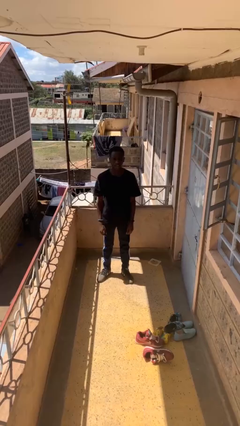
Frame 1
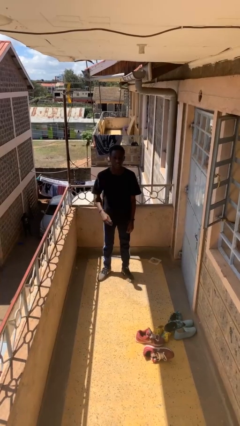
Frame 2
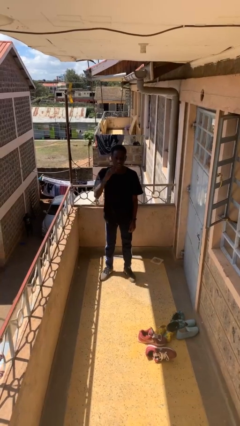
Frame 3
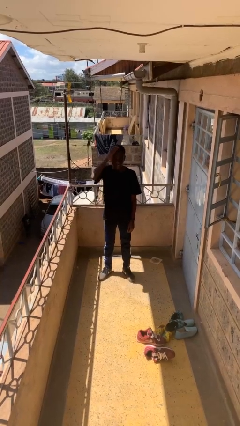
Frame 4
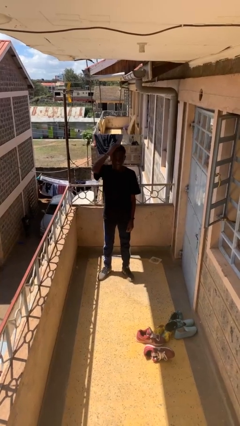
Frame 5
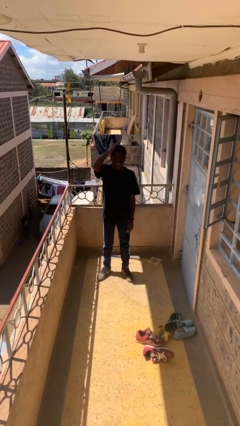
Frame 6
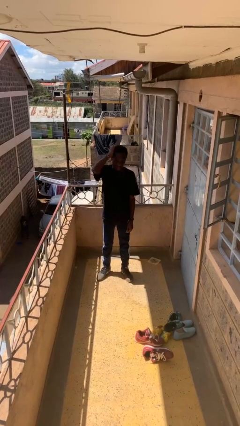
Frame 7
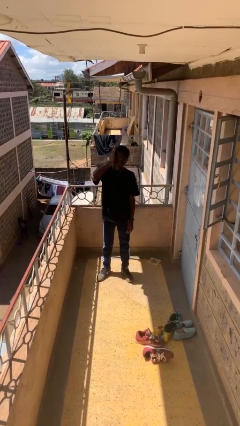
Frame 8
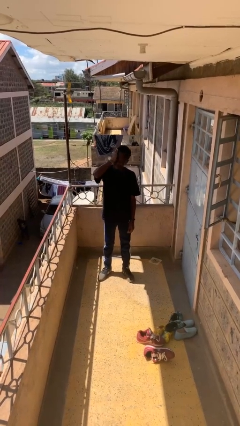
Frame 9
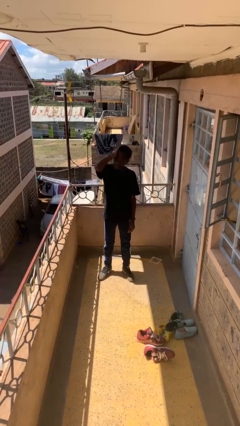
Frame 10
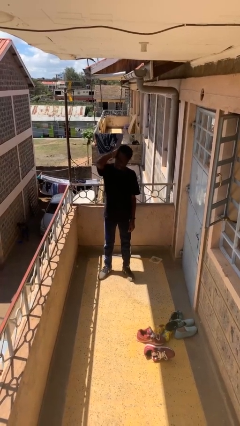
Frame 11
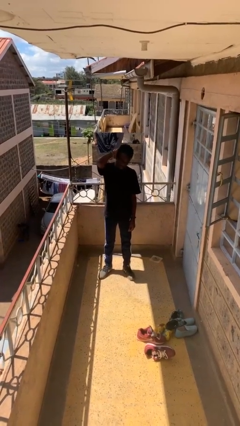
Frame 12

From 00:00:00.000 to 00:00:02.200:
person strokes hair

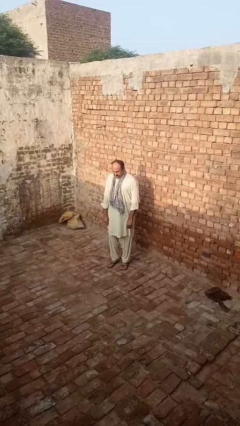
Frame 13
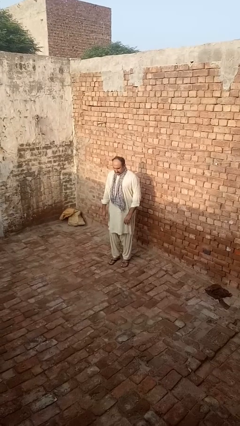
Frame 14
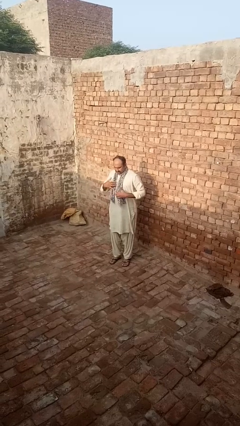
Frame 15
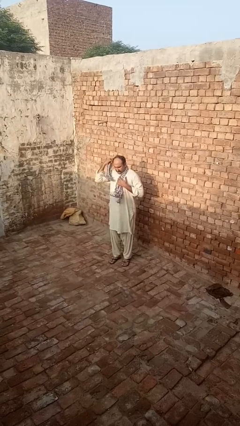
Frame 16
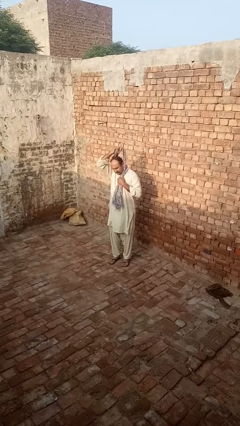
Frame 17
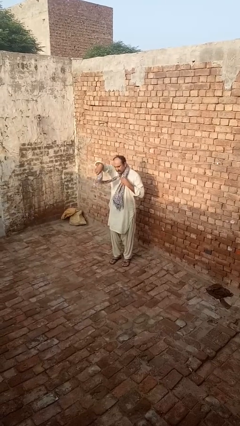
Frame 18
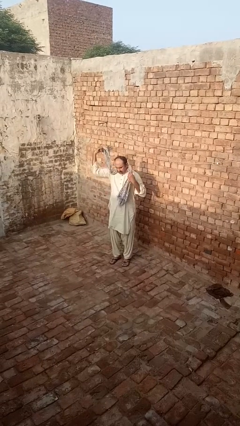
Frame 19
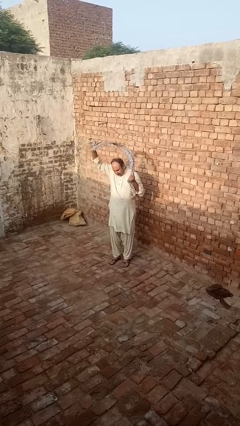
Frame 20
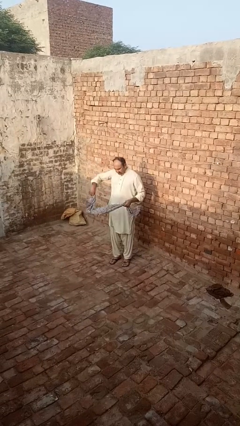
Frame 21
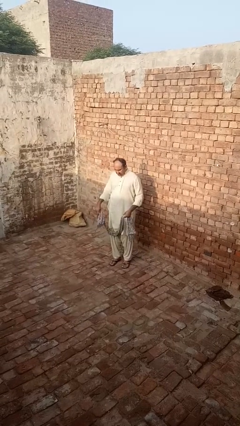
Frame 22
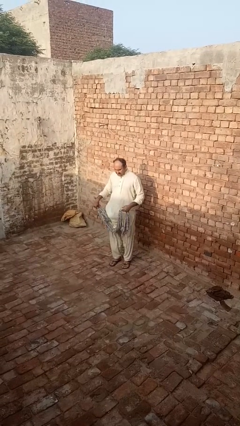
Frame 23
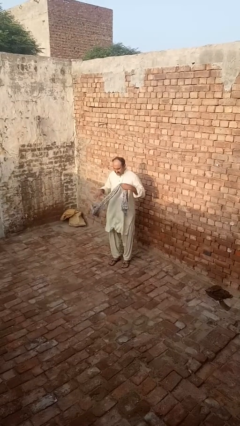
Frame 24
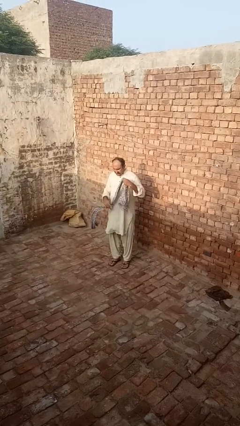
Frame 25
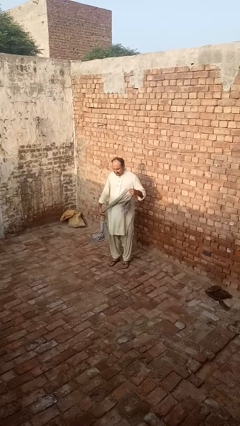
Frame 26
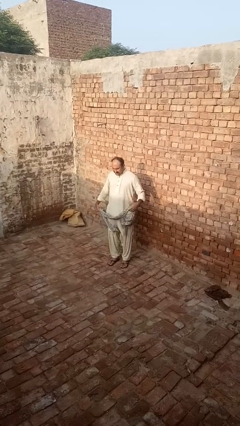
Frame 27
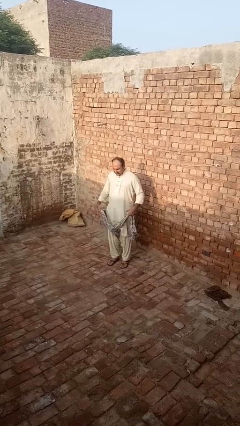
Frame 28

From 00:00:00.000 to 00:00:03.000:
person takes off scarf

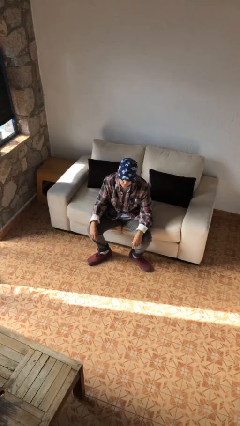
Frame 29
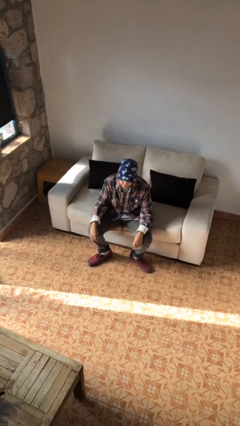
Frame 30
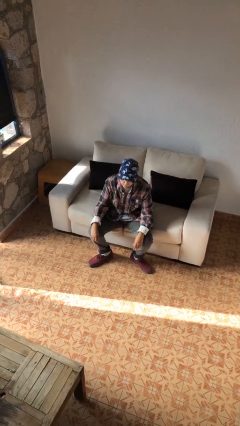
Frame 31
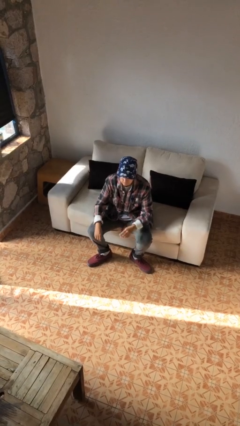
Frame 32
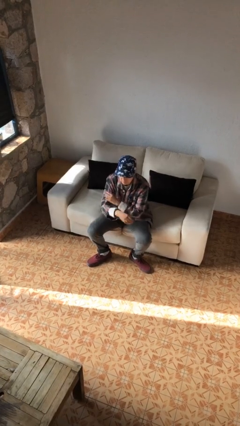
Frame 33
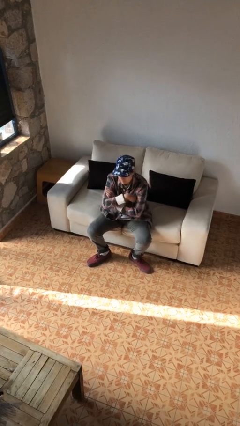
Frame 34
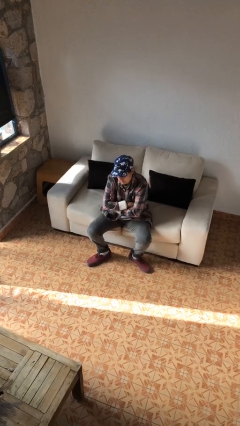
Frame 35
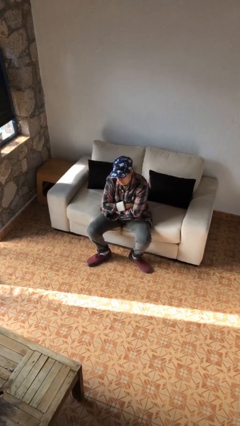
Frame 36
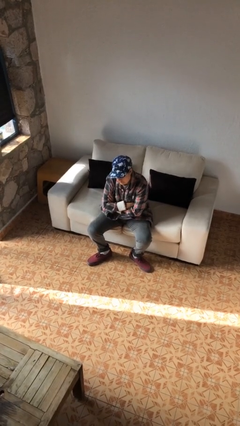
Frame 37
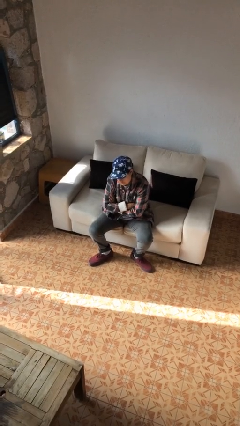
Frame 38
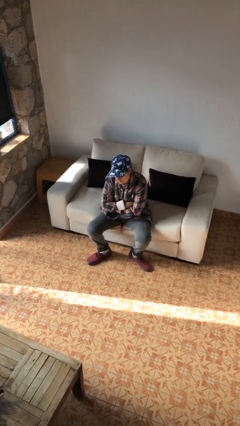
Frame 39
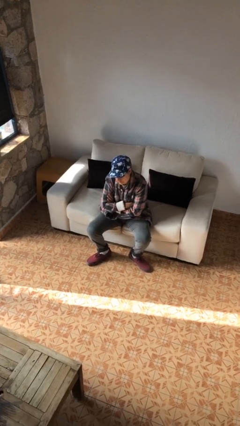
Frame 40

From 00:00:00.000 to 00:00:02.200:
person crosses arms

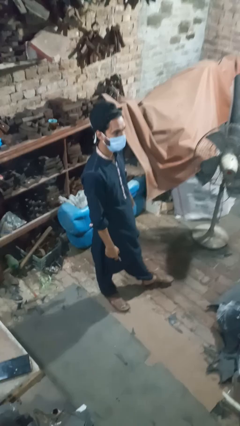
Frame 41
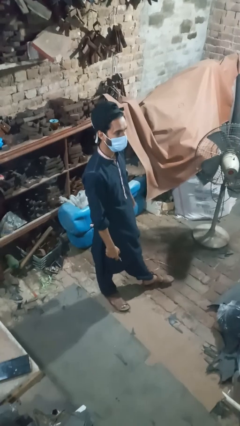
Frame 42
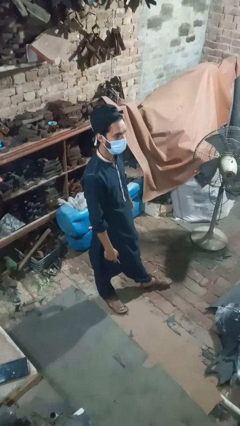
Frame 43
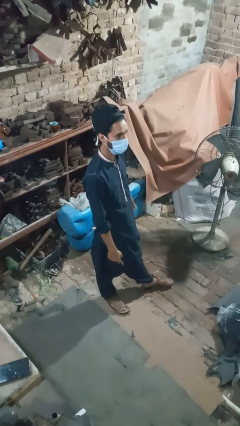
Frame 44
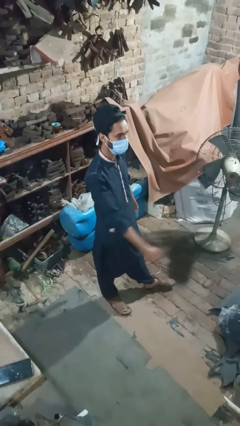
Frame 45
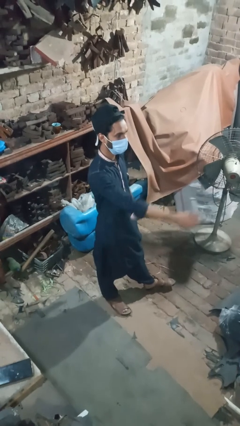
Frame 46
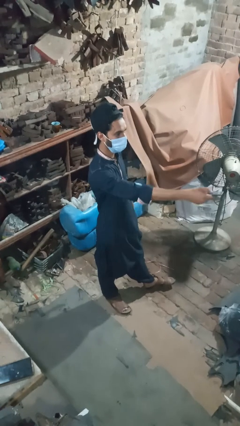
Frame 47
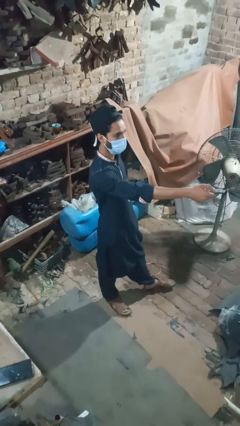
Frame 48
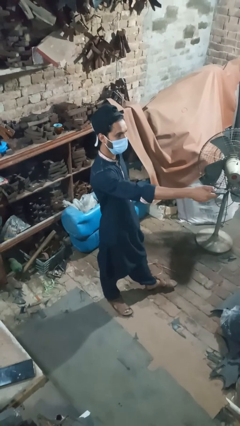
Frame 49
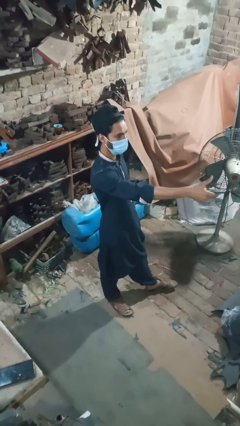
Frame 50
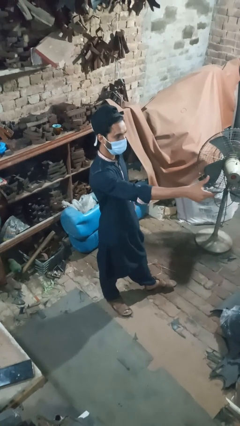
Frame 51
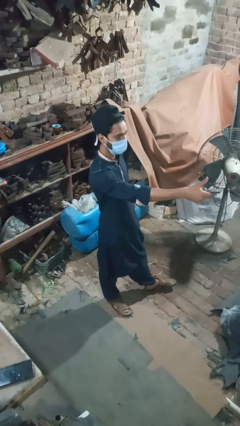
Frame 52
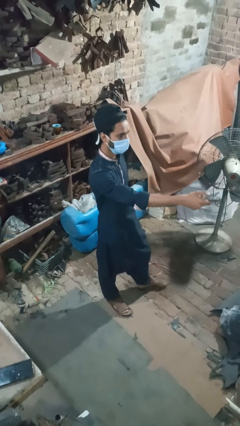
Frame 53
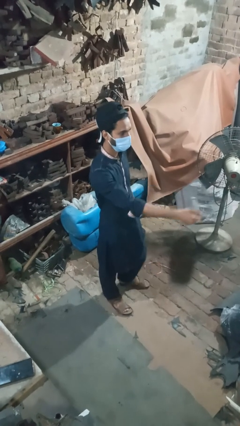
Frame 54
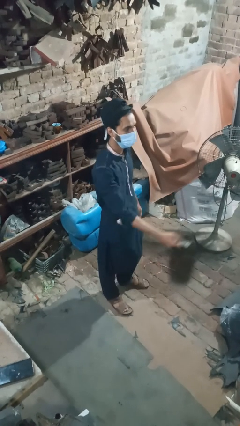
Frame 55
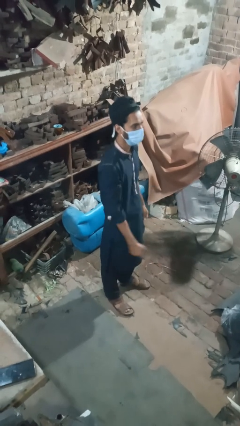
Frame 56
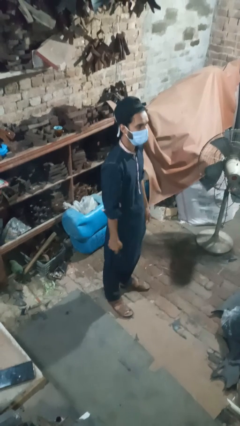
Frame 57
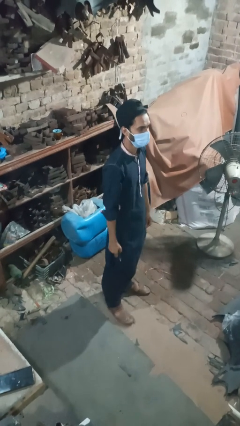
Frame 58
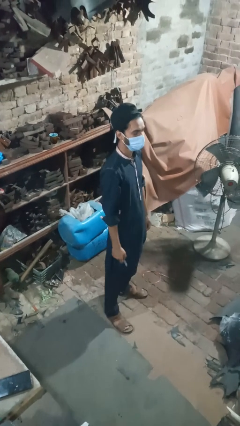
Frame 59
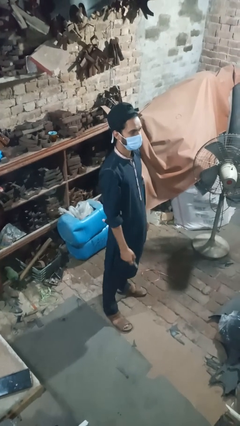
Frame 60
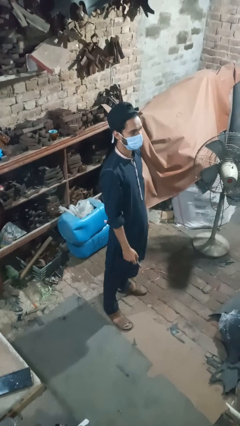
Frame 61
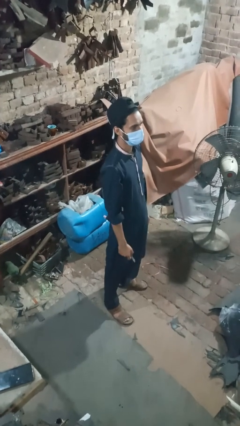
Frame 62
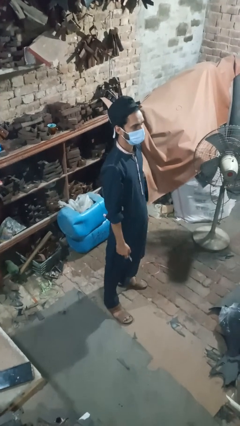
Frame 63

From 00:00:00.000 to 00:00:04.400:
person uses television remote

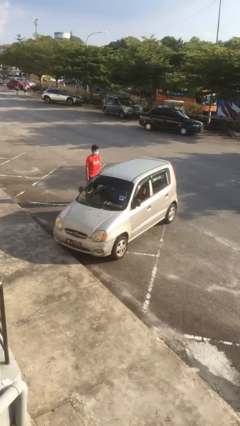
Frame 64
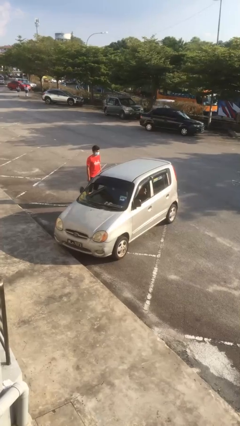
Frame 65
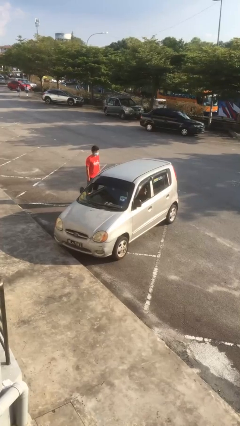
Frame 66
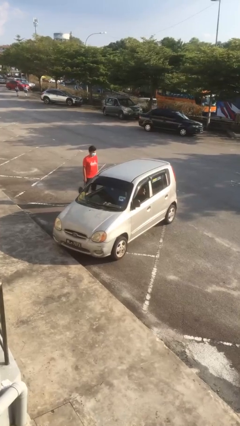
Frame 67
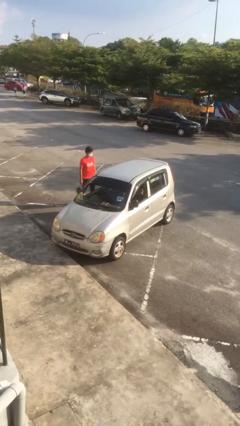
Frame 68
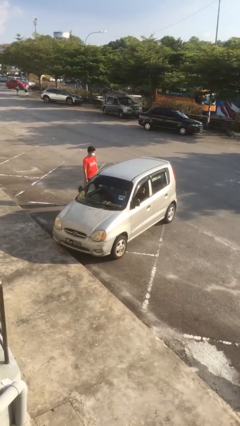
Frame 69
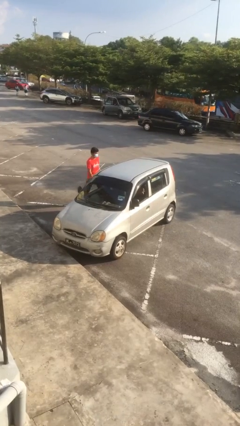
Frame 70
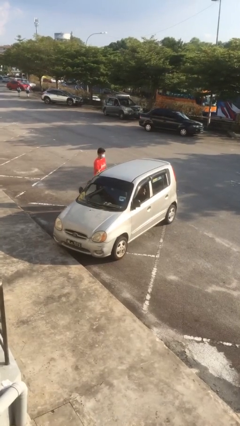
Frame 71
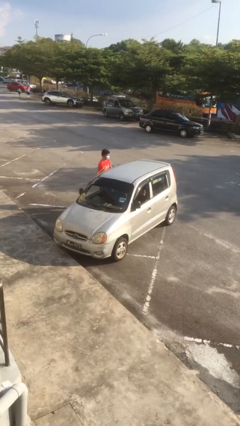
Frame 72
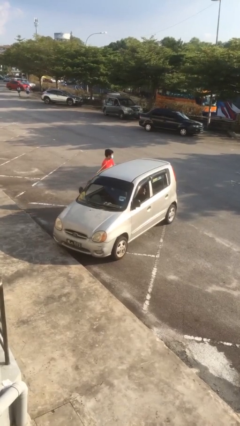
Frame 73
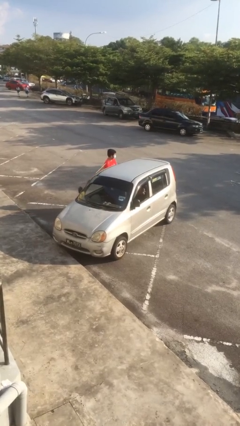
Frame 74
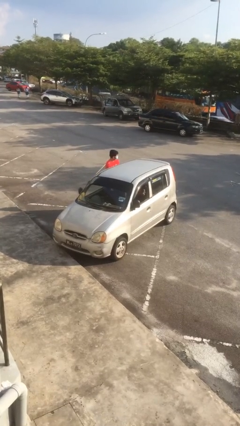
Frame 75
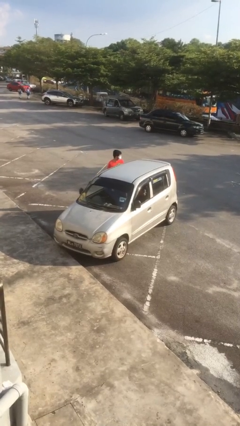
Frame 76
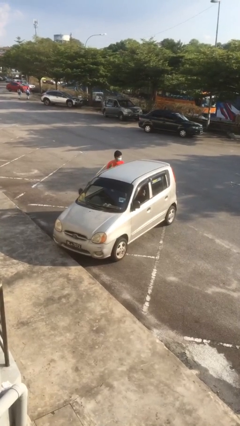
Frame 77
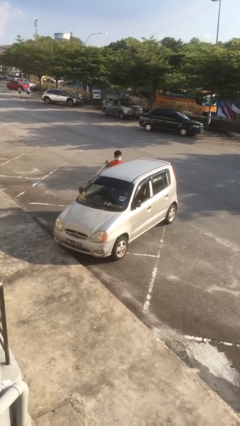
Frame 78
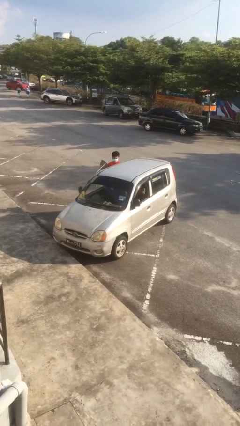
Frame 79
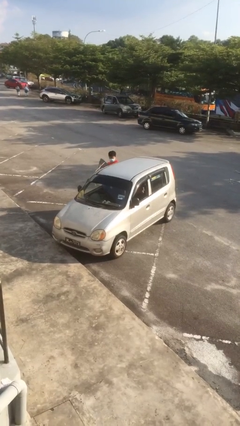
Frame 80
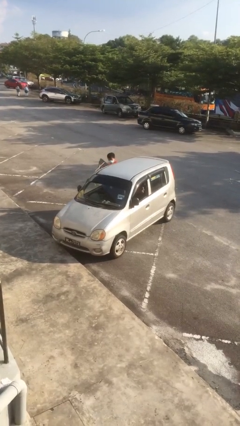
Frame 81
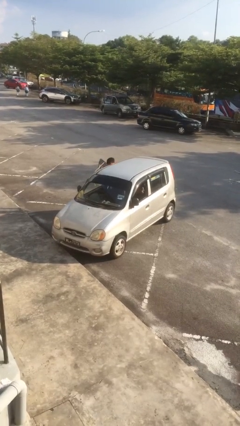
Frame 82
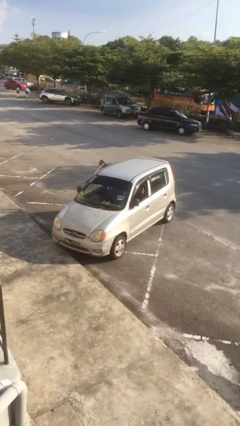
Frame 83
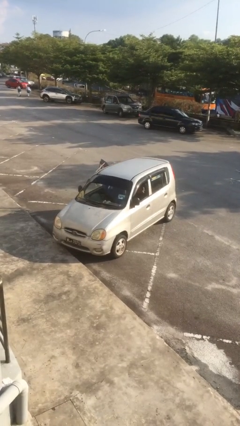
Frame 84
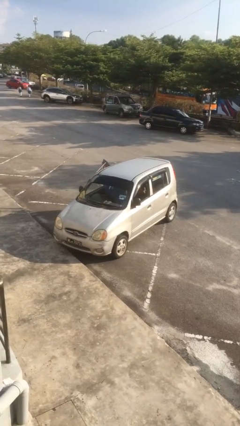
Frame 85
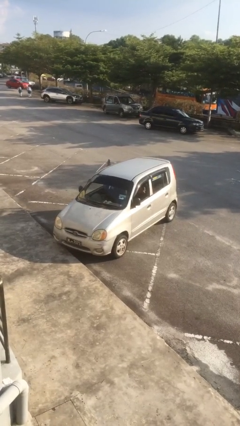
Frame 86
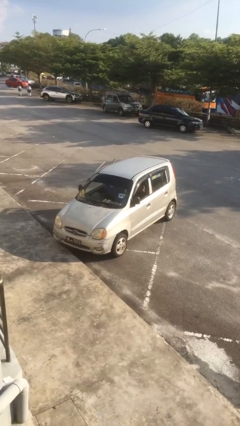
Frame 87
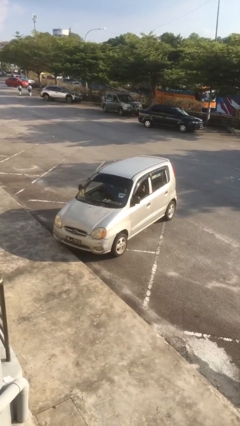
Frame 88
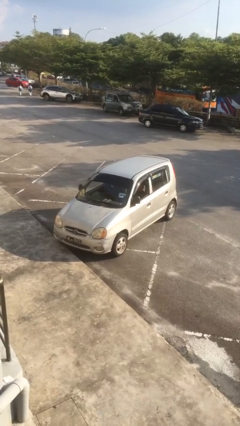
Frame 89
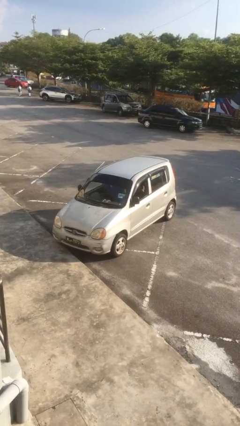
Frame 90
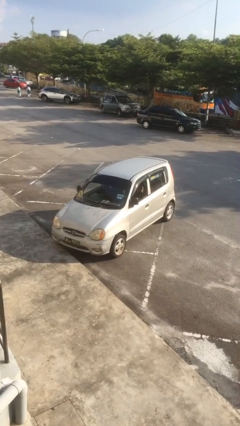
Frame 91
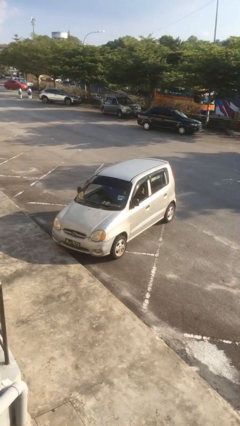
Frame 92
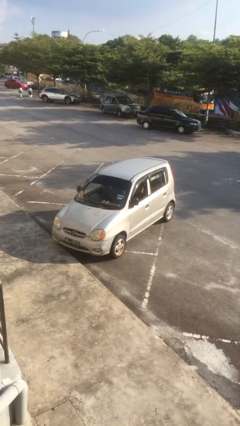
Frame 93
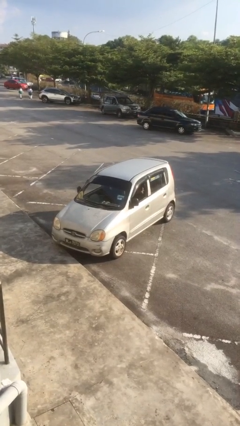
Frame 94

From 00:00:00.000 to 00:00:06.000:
car picks up person

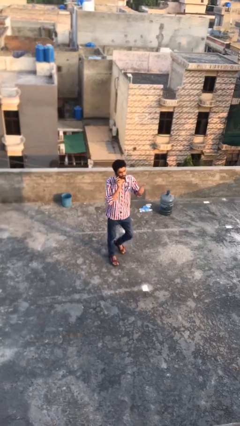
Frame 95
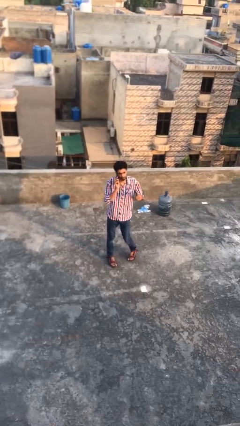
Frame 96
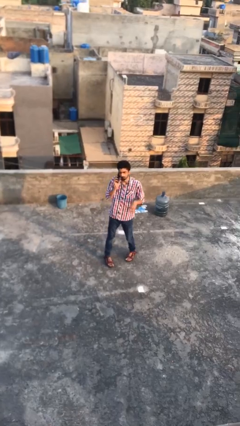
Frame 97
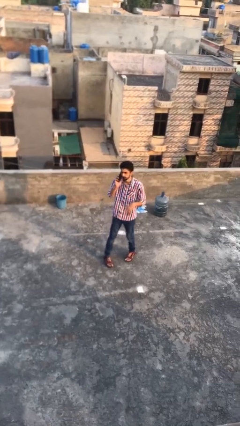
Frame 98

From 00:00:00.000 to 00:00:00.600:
person talks on phone
